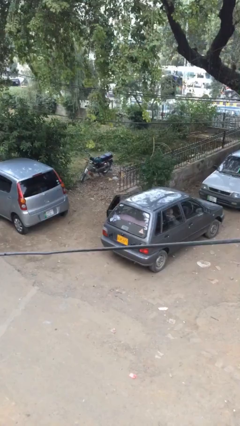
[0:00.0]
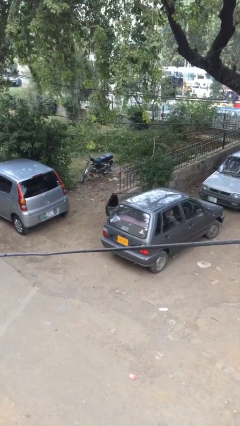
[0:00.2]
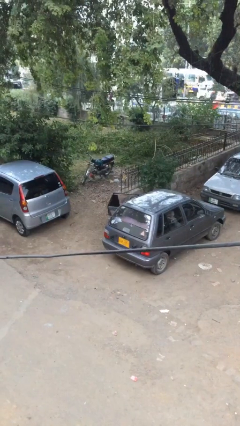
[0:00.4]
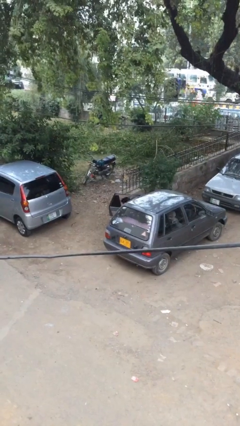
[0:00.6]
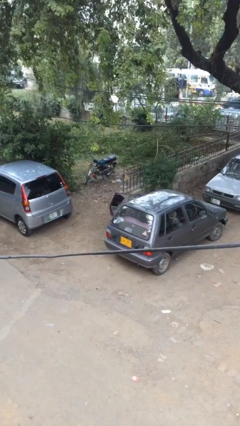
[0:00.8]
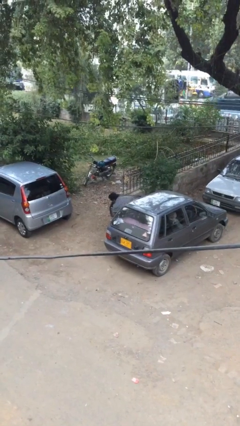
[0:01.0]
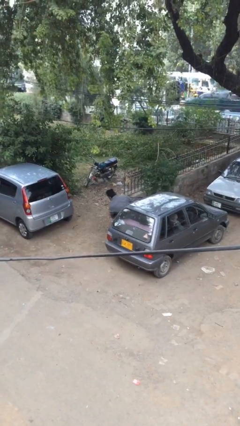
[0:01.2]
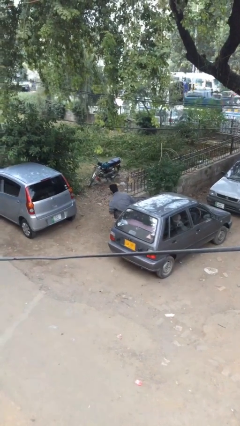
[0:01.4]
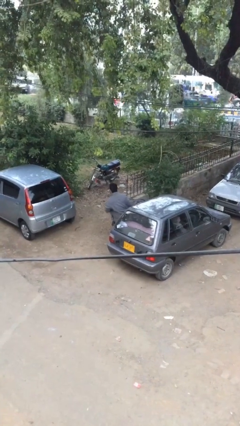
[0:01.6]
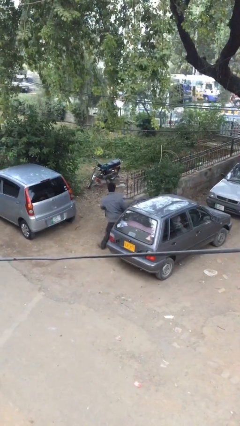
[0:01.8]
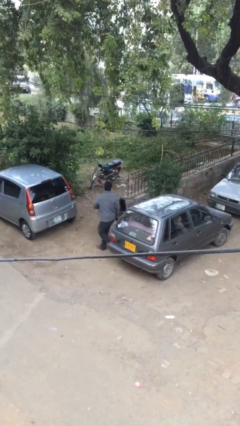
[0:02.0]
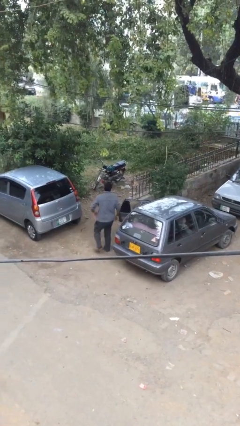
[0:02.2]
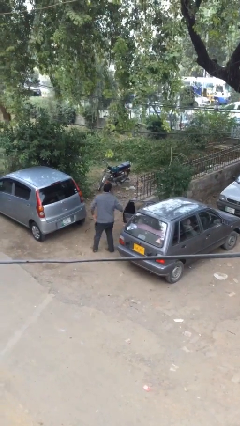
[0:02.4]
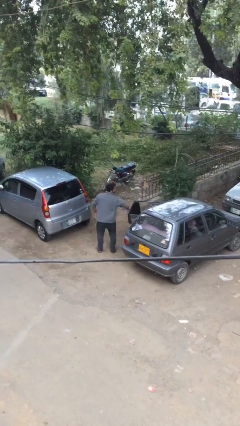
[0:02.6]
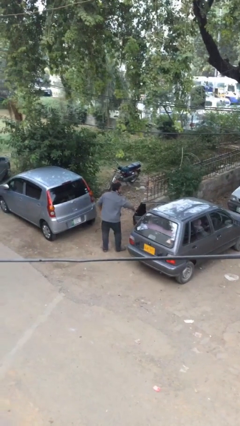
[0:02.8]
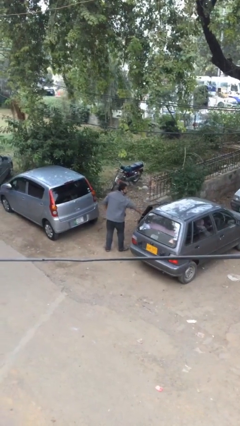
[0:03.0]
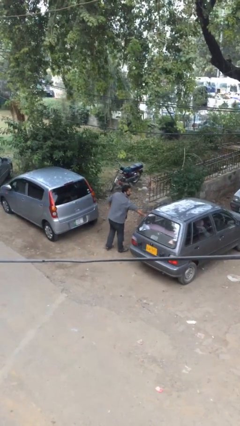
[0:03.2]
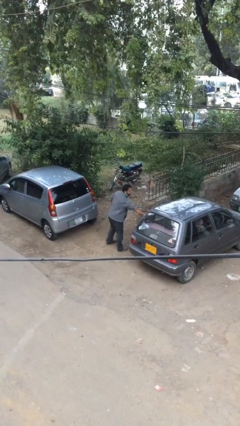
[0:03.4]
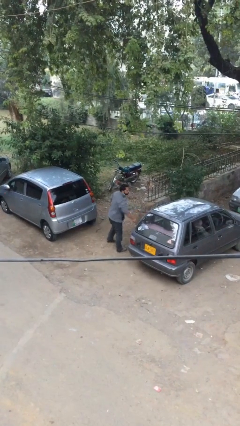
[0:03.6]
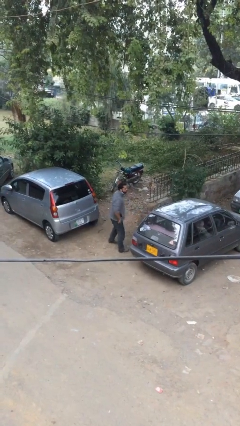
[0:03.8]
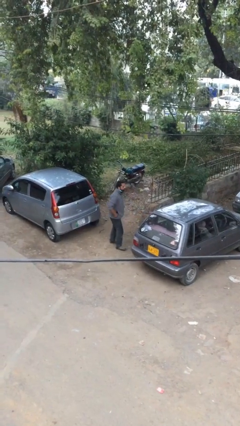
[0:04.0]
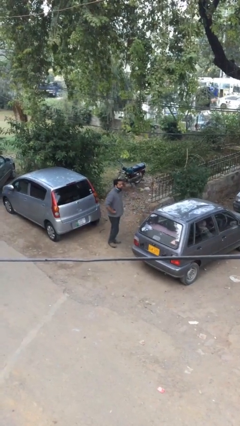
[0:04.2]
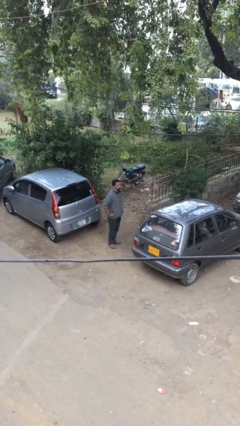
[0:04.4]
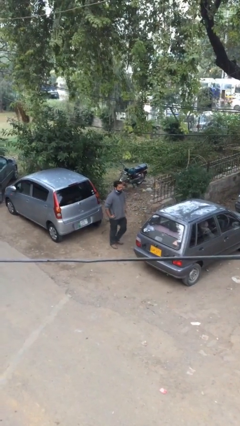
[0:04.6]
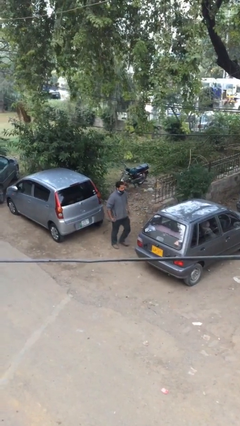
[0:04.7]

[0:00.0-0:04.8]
car drops off person

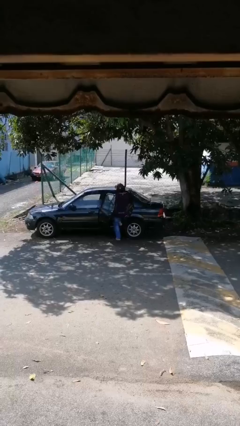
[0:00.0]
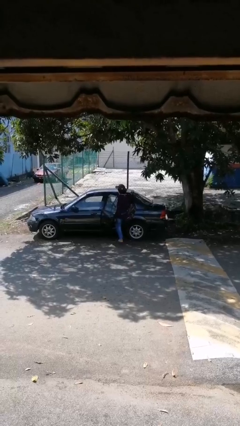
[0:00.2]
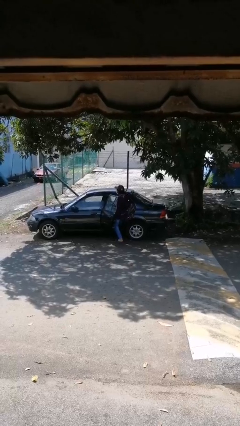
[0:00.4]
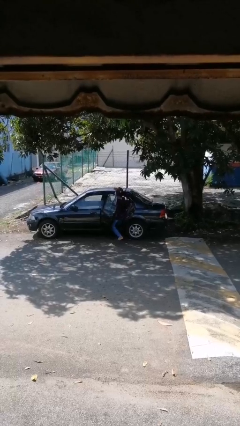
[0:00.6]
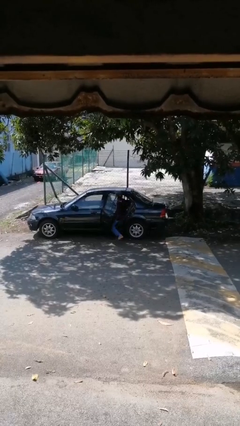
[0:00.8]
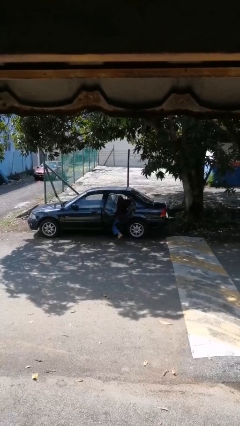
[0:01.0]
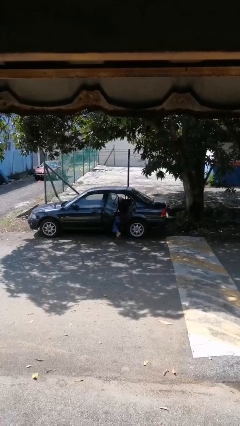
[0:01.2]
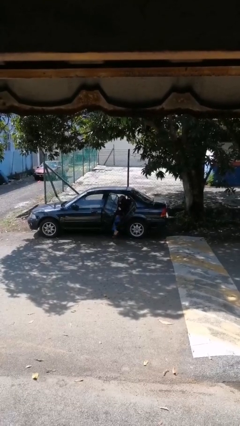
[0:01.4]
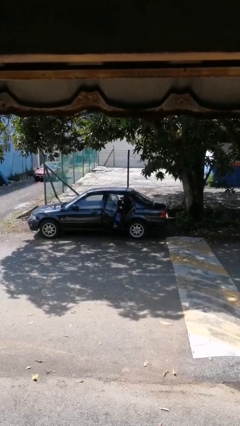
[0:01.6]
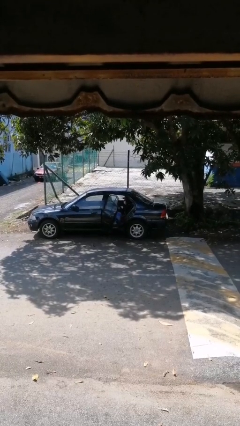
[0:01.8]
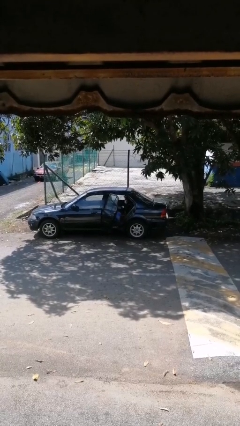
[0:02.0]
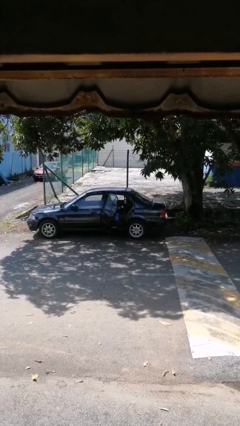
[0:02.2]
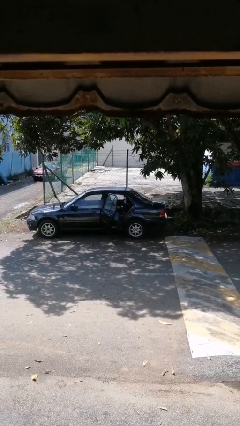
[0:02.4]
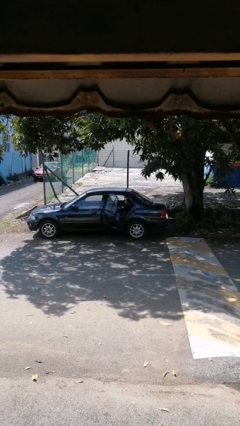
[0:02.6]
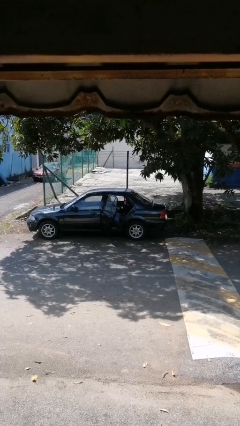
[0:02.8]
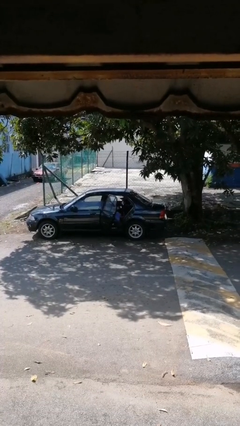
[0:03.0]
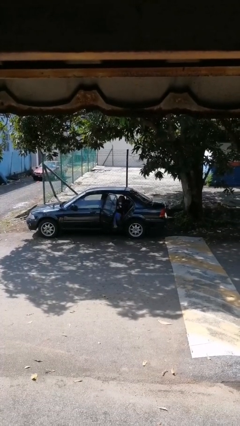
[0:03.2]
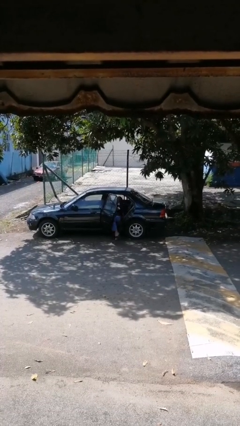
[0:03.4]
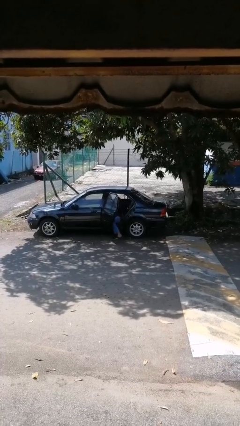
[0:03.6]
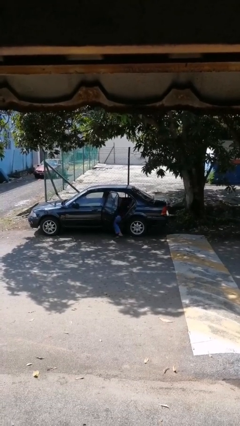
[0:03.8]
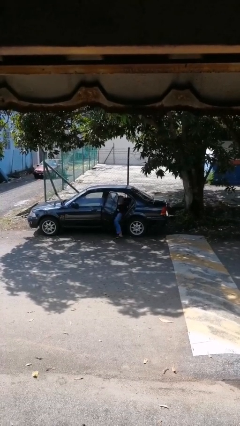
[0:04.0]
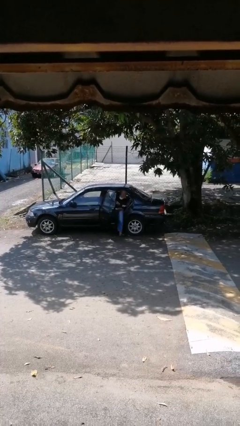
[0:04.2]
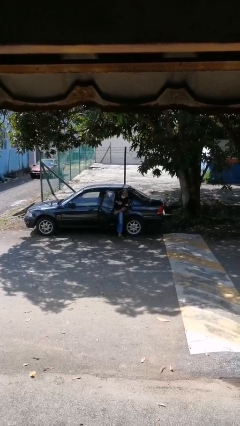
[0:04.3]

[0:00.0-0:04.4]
person exits car

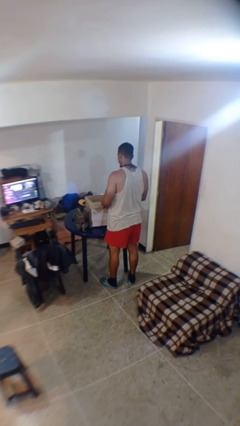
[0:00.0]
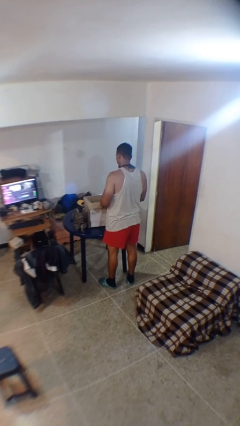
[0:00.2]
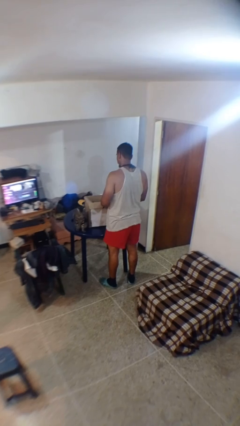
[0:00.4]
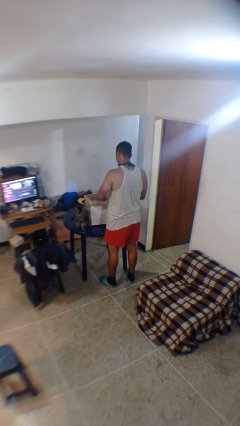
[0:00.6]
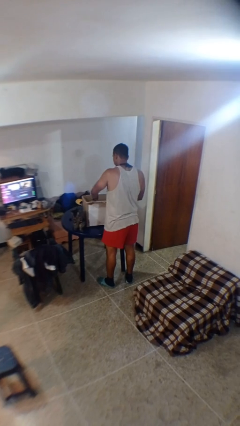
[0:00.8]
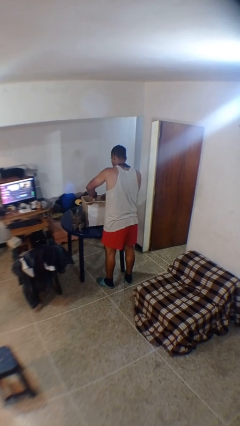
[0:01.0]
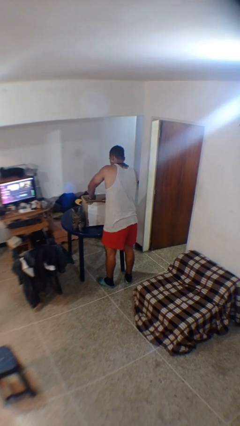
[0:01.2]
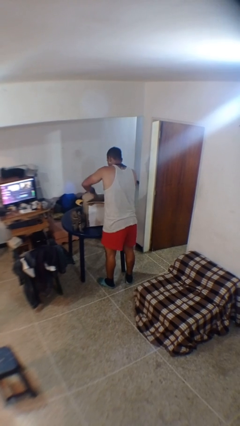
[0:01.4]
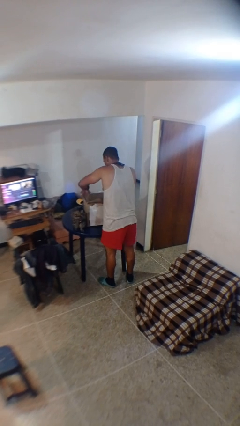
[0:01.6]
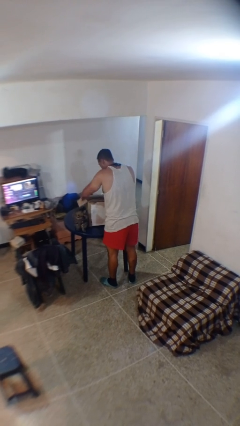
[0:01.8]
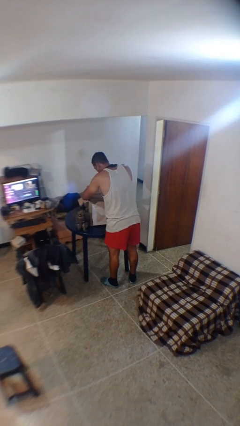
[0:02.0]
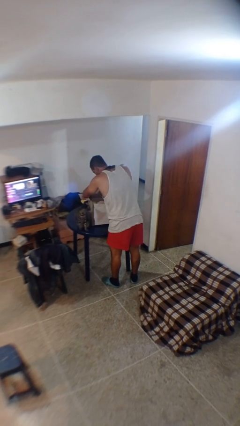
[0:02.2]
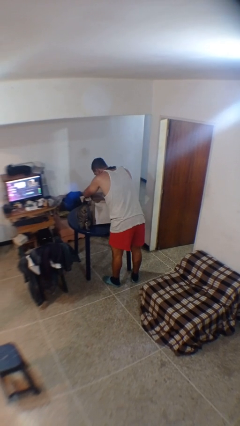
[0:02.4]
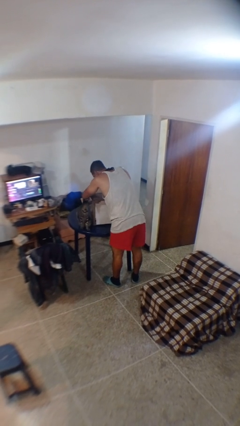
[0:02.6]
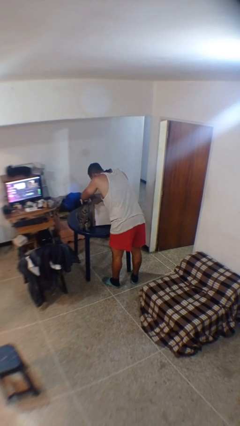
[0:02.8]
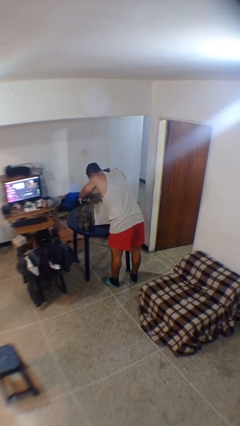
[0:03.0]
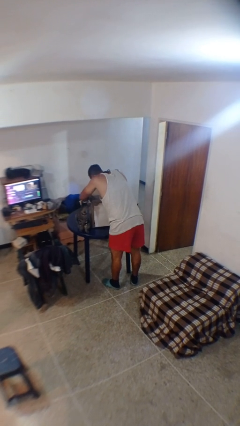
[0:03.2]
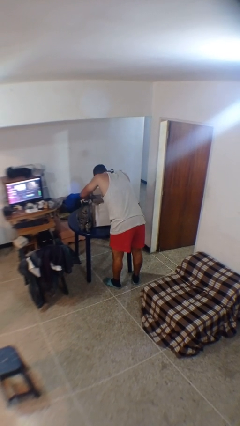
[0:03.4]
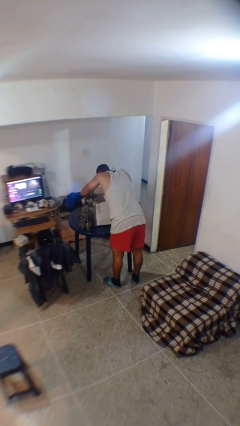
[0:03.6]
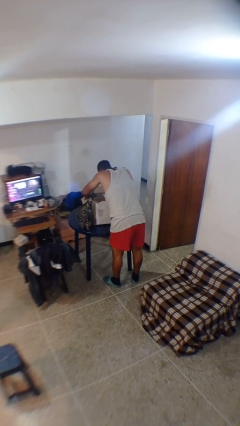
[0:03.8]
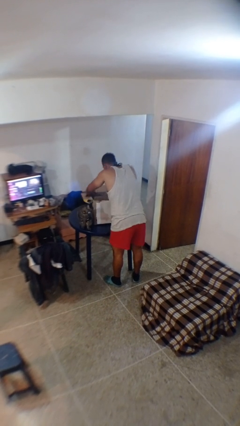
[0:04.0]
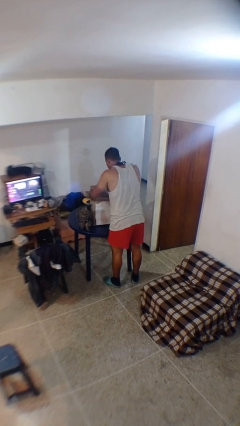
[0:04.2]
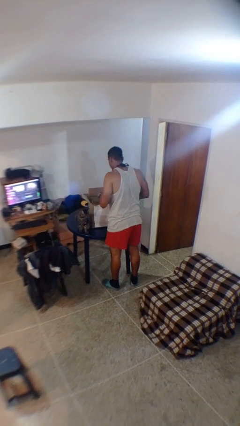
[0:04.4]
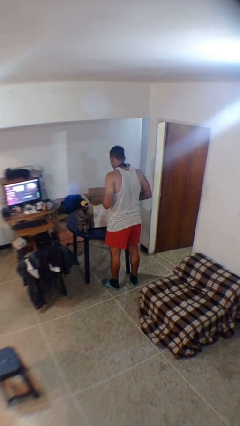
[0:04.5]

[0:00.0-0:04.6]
person searches in box

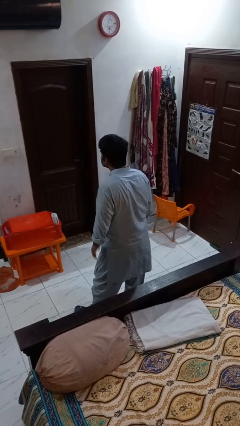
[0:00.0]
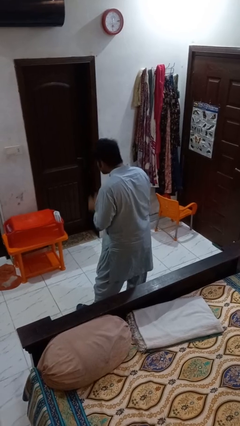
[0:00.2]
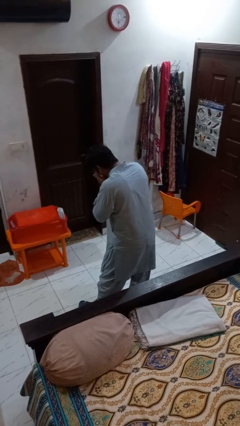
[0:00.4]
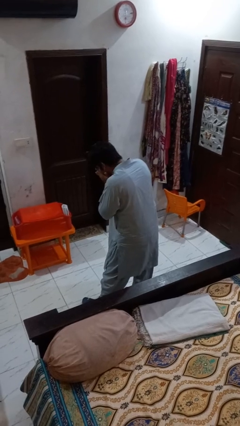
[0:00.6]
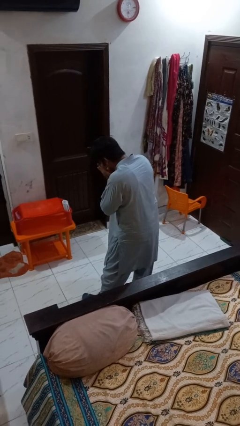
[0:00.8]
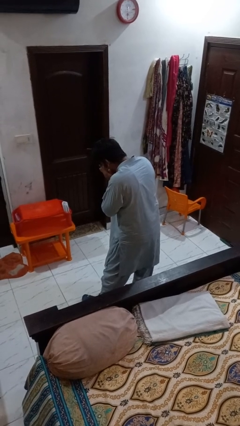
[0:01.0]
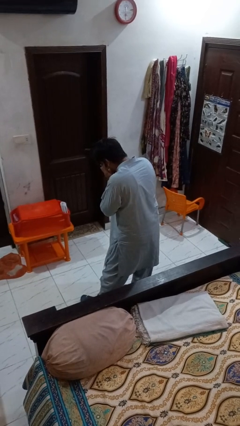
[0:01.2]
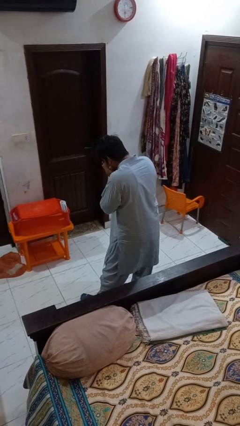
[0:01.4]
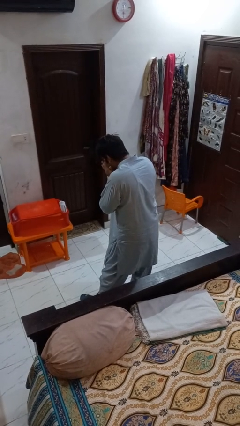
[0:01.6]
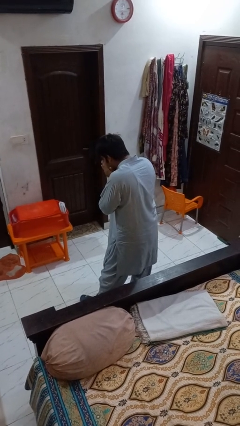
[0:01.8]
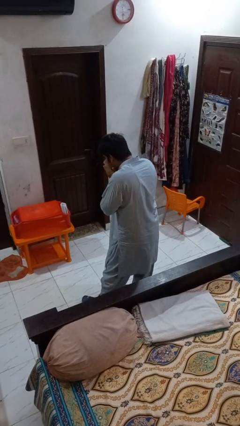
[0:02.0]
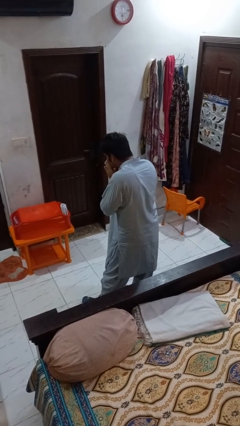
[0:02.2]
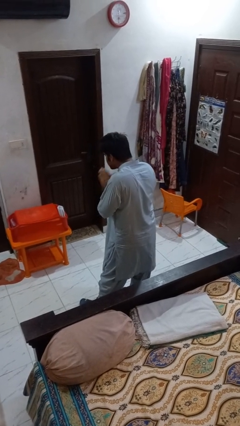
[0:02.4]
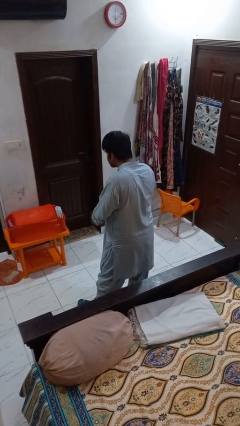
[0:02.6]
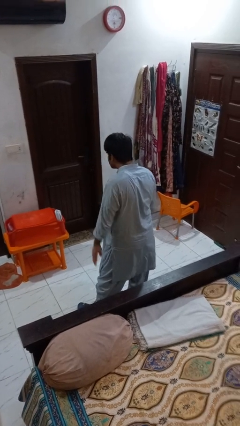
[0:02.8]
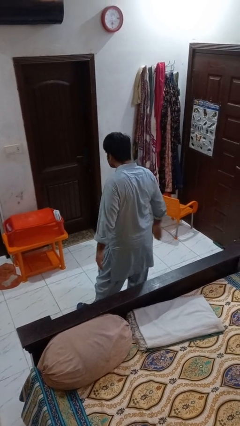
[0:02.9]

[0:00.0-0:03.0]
person sneezes into hand

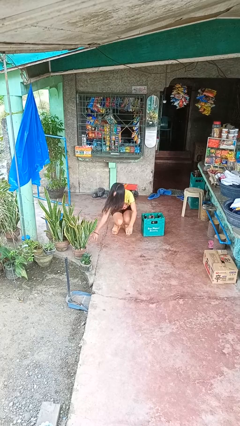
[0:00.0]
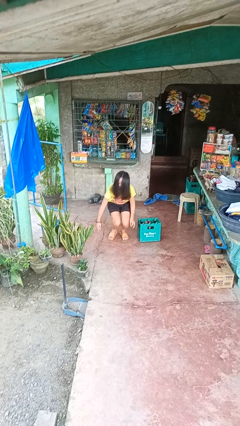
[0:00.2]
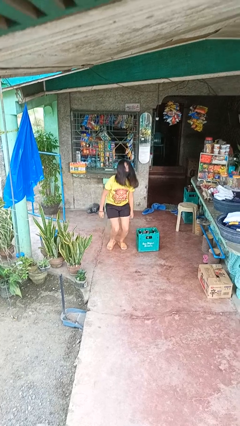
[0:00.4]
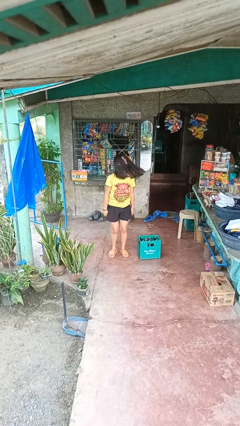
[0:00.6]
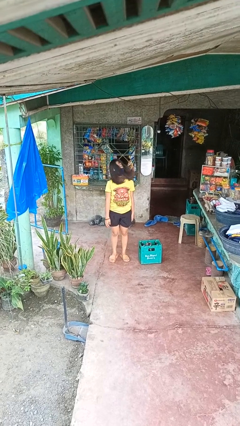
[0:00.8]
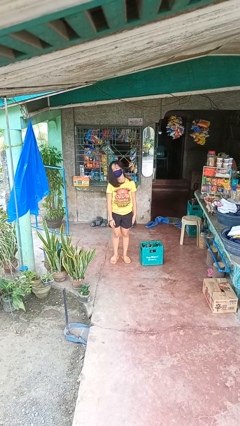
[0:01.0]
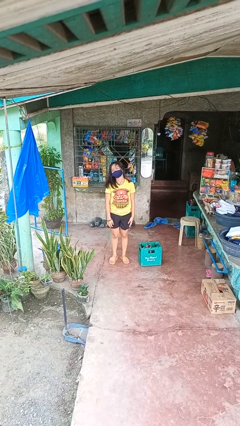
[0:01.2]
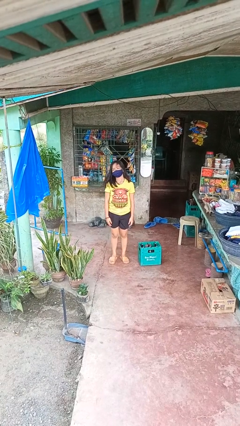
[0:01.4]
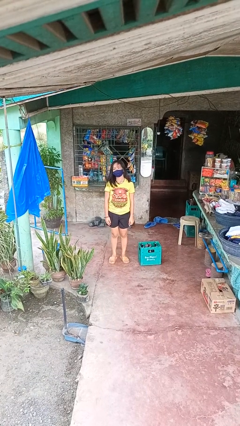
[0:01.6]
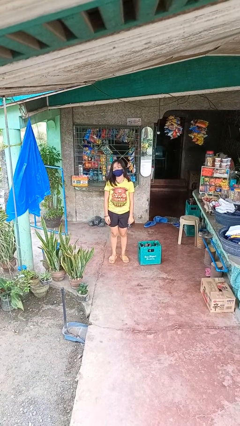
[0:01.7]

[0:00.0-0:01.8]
person stands up from floor
